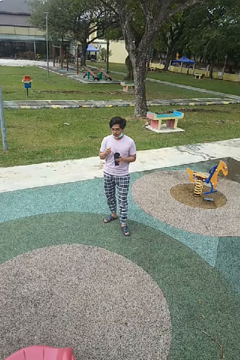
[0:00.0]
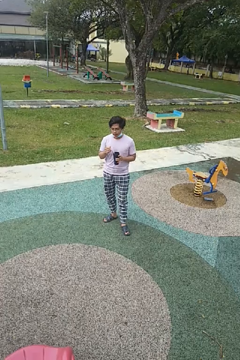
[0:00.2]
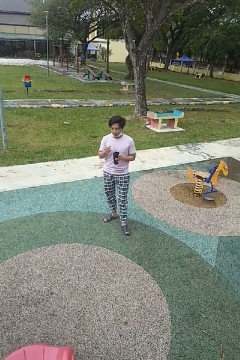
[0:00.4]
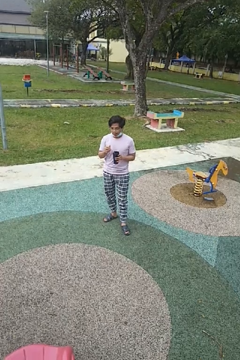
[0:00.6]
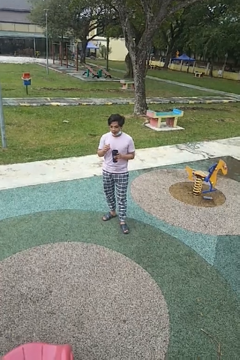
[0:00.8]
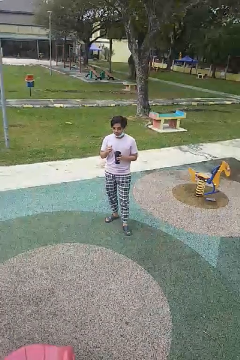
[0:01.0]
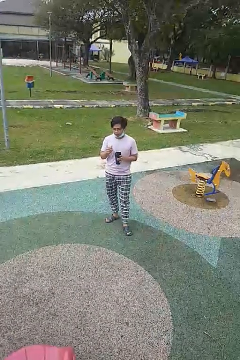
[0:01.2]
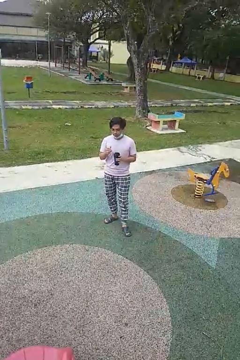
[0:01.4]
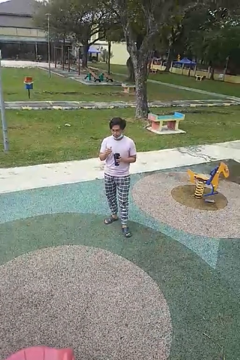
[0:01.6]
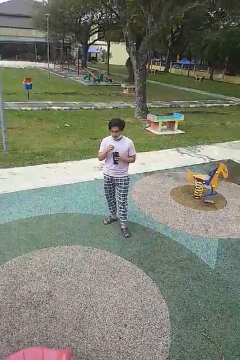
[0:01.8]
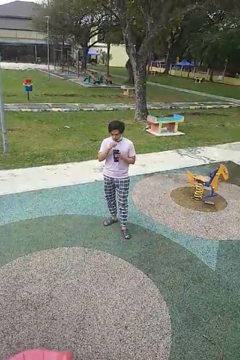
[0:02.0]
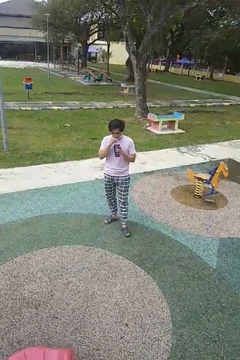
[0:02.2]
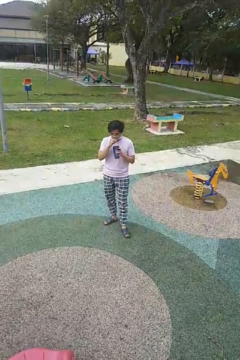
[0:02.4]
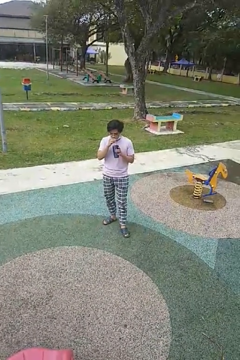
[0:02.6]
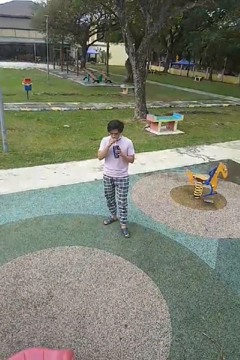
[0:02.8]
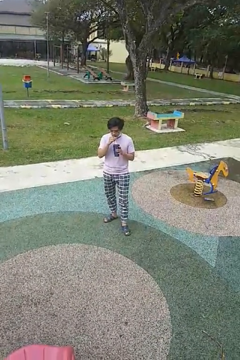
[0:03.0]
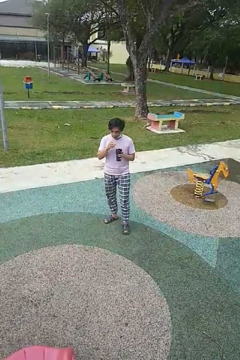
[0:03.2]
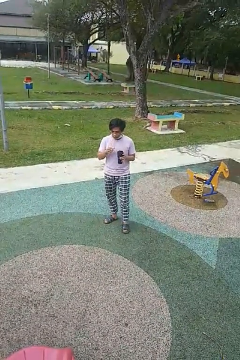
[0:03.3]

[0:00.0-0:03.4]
person drinks from straw

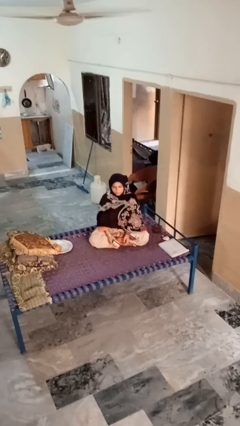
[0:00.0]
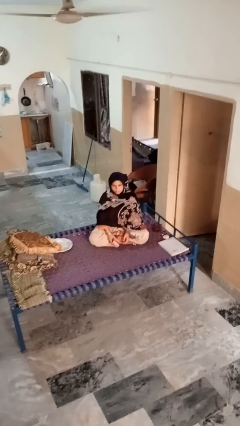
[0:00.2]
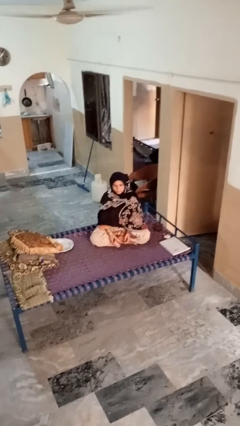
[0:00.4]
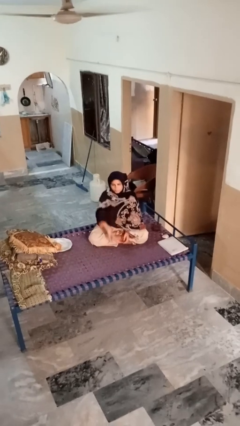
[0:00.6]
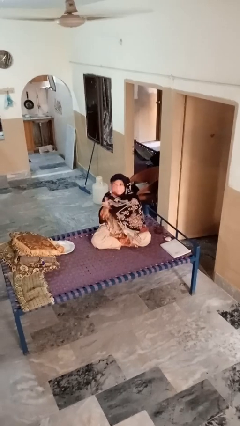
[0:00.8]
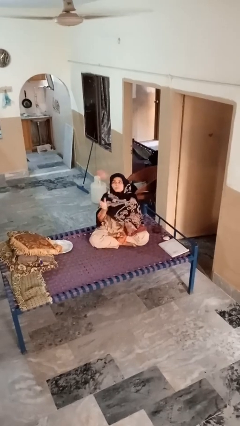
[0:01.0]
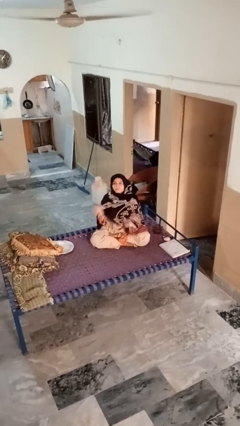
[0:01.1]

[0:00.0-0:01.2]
person drops object

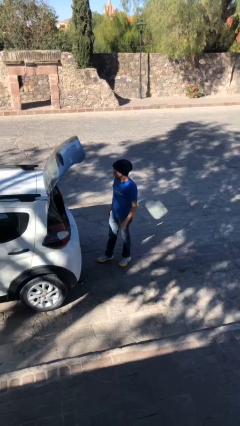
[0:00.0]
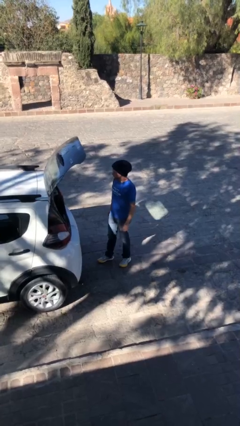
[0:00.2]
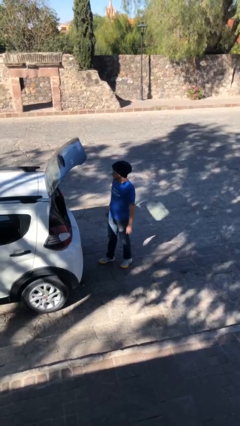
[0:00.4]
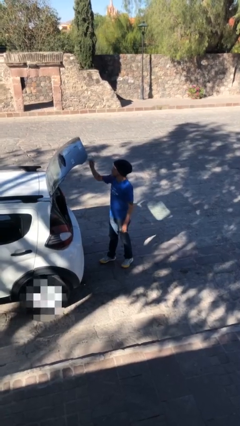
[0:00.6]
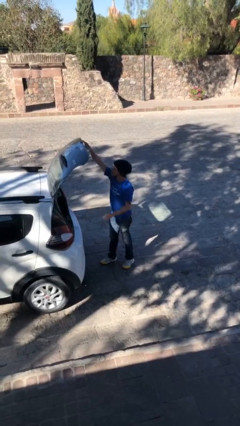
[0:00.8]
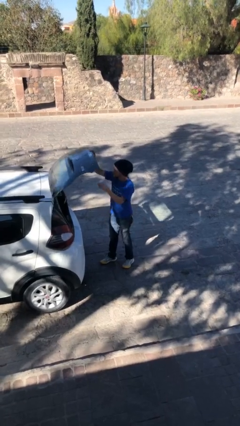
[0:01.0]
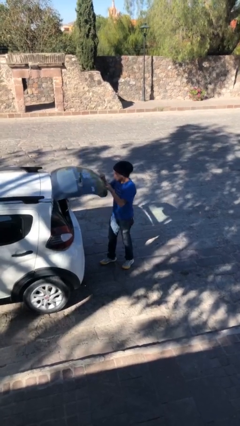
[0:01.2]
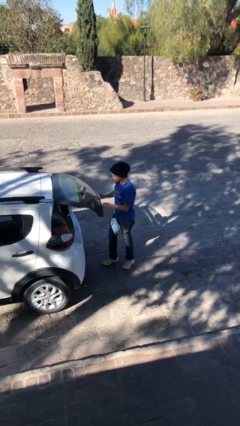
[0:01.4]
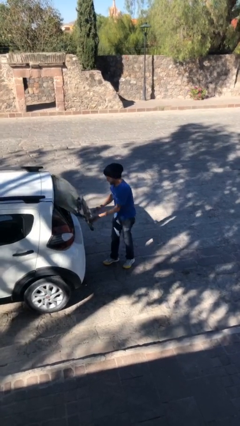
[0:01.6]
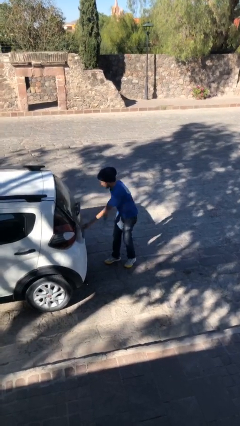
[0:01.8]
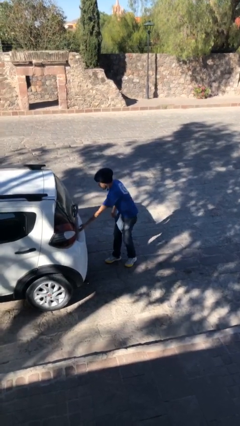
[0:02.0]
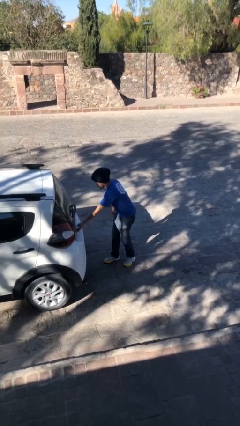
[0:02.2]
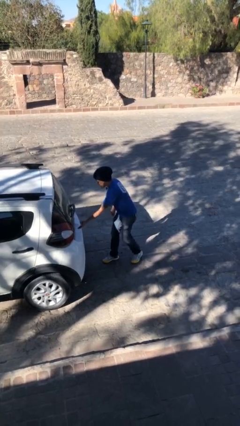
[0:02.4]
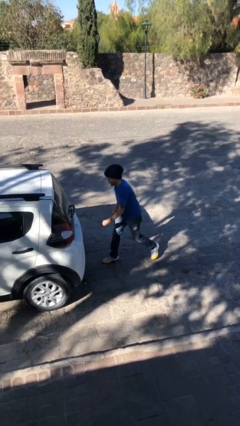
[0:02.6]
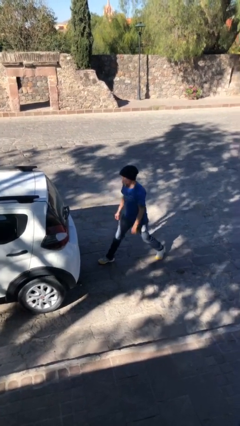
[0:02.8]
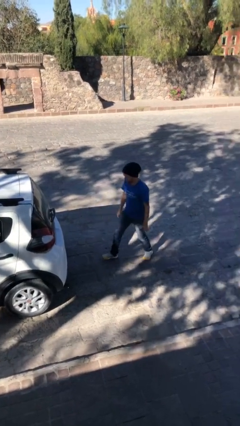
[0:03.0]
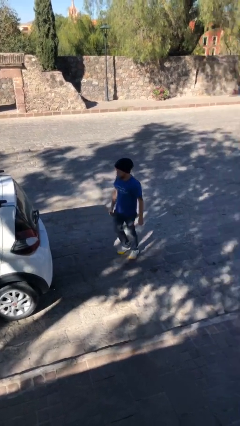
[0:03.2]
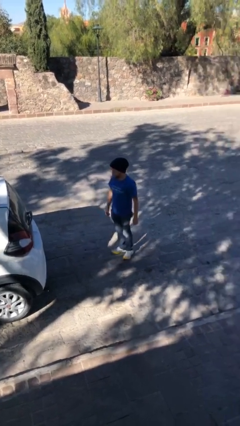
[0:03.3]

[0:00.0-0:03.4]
person closes car trunk

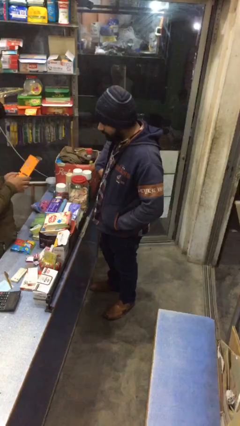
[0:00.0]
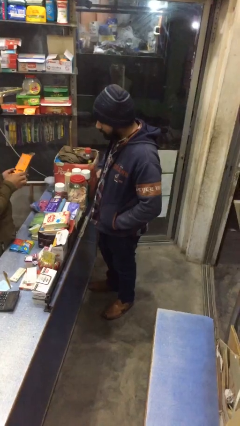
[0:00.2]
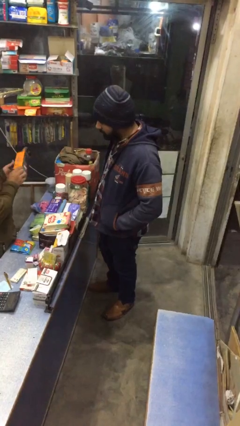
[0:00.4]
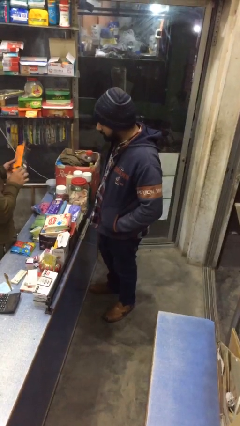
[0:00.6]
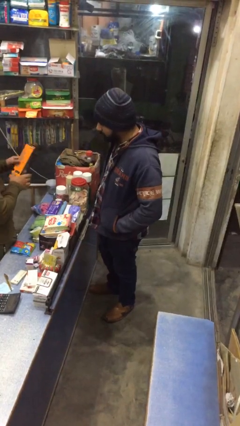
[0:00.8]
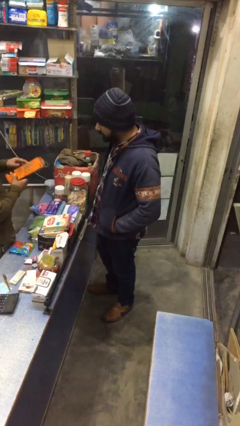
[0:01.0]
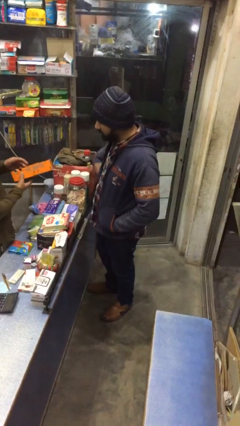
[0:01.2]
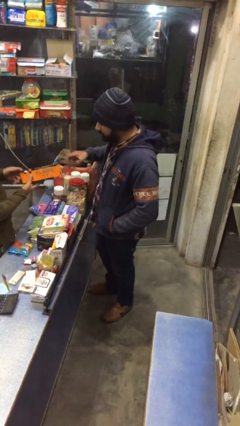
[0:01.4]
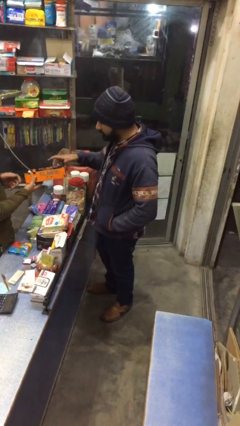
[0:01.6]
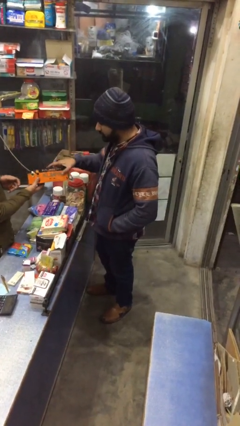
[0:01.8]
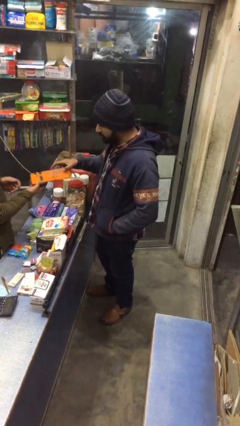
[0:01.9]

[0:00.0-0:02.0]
person transfers object to person

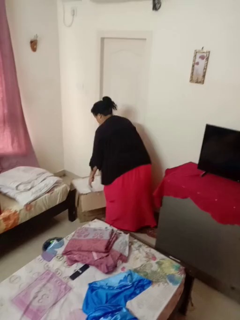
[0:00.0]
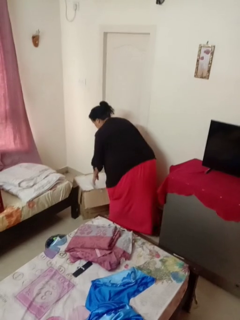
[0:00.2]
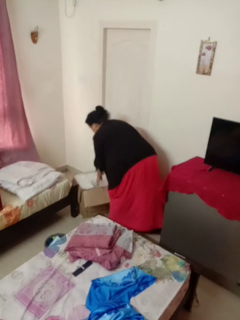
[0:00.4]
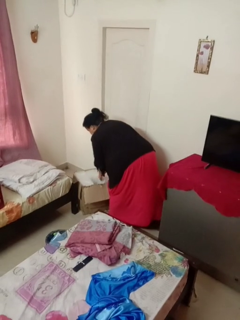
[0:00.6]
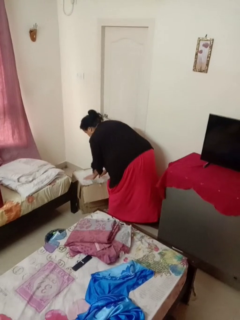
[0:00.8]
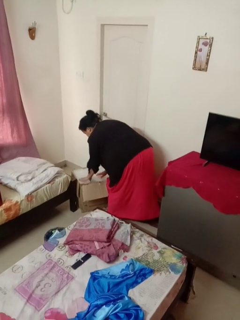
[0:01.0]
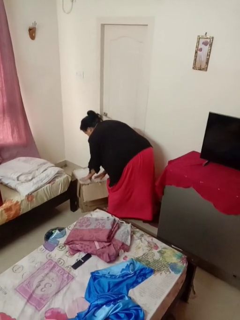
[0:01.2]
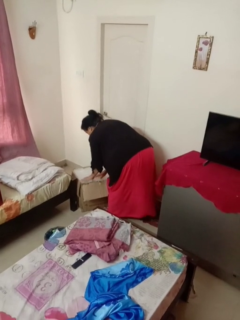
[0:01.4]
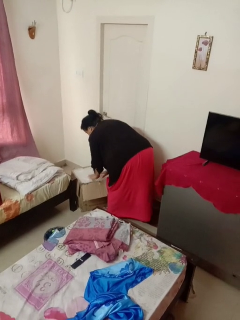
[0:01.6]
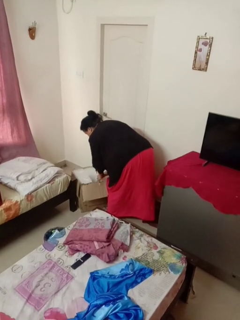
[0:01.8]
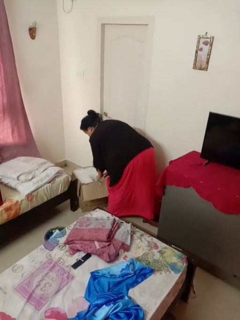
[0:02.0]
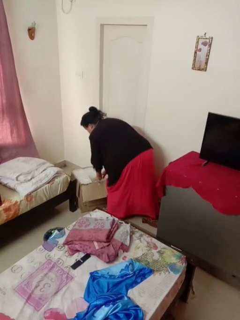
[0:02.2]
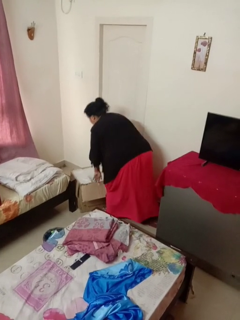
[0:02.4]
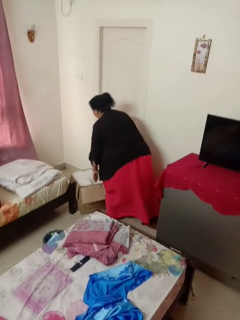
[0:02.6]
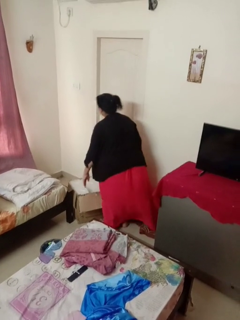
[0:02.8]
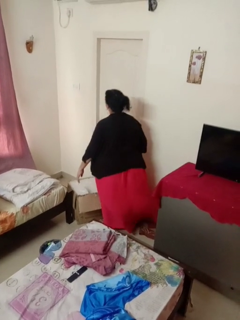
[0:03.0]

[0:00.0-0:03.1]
person searches in box

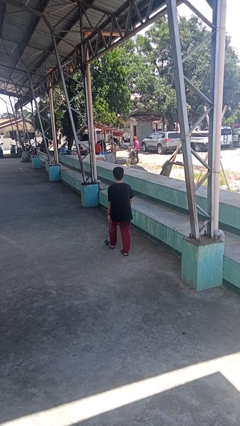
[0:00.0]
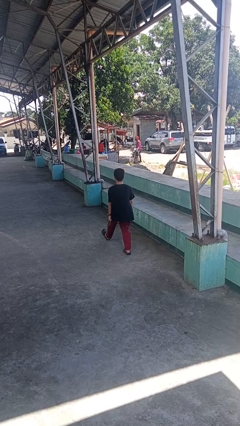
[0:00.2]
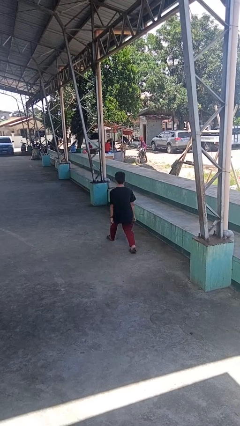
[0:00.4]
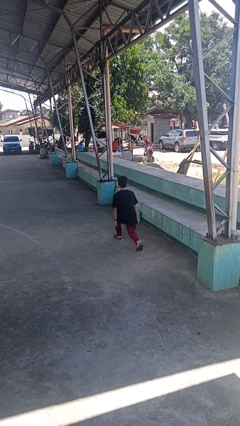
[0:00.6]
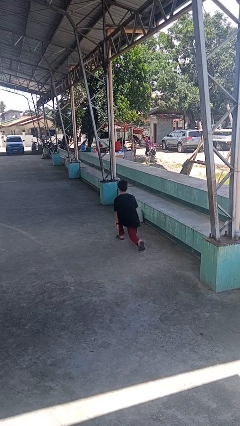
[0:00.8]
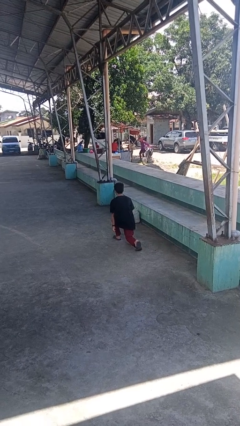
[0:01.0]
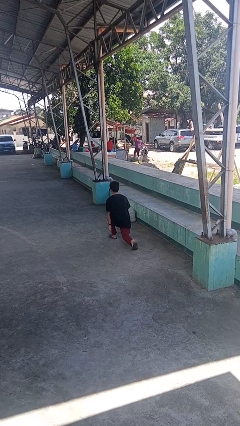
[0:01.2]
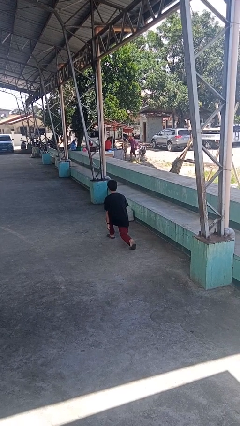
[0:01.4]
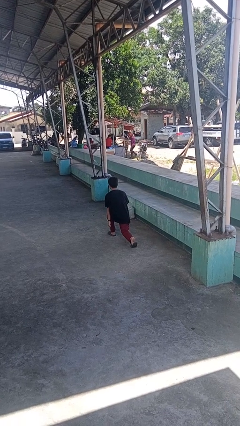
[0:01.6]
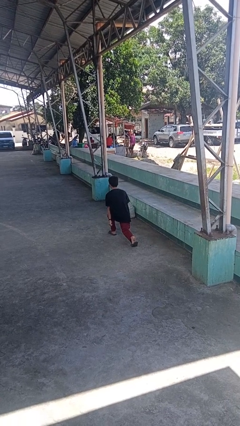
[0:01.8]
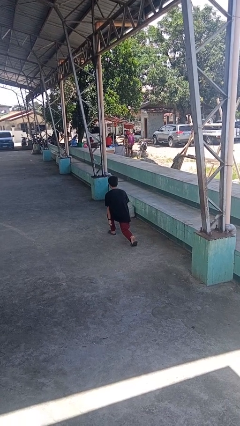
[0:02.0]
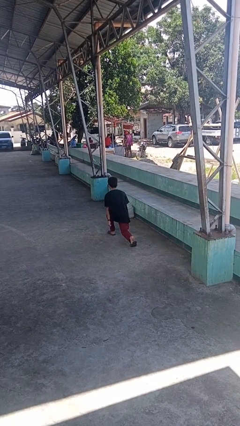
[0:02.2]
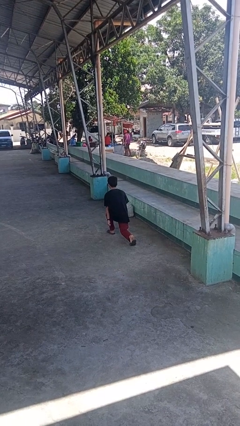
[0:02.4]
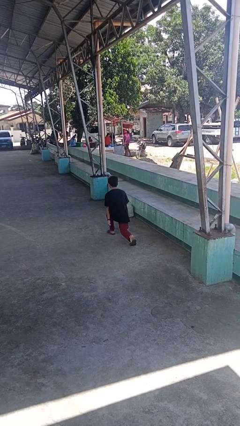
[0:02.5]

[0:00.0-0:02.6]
person exercises with lunges

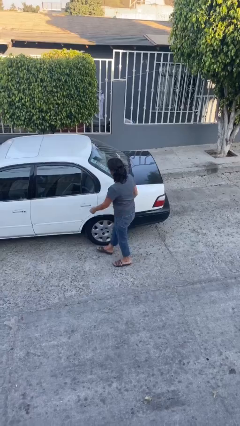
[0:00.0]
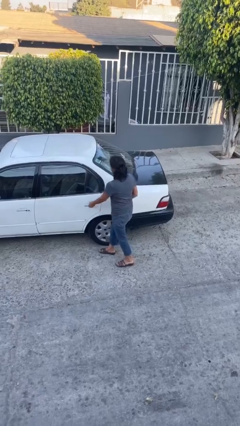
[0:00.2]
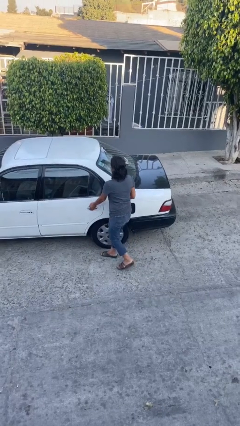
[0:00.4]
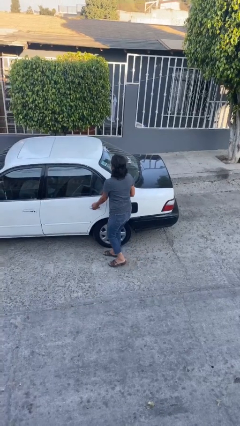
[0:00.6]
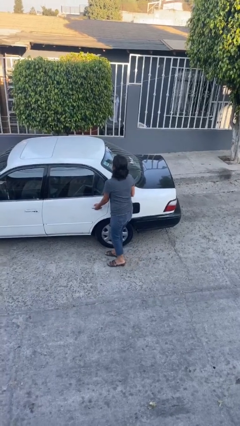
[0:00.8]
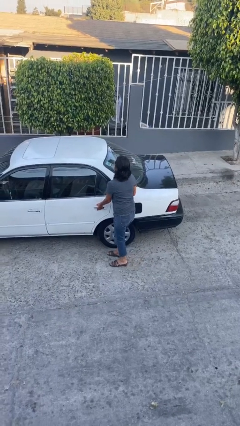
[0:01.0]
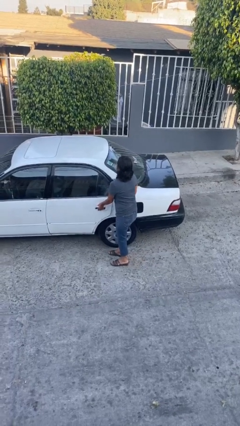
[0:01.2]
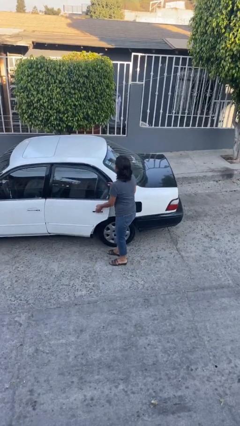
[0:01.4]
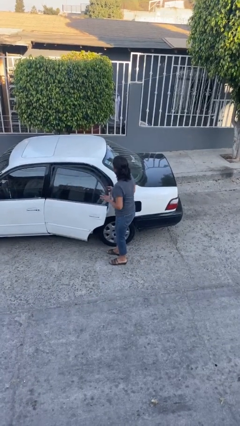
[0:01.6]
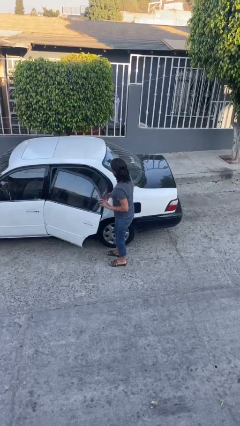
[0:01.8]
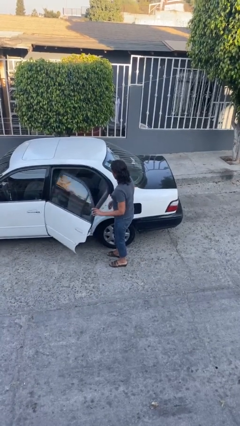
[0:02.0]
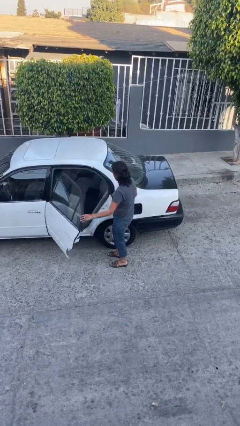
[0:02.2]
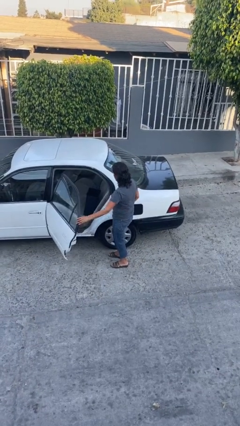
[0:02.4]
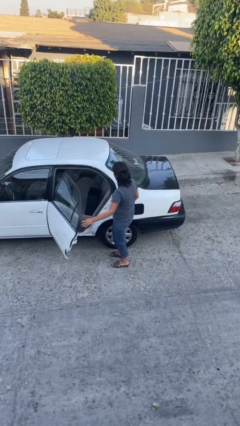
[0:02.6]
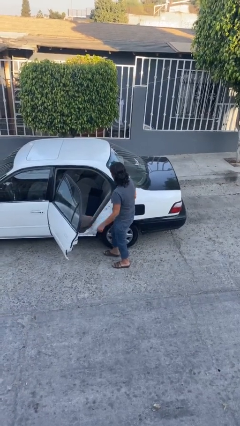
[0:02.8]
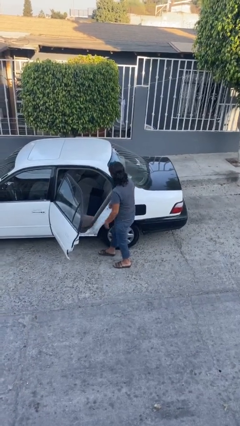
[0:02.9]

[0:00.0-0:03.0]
person opens car door
